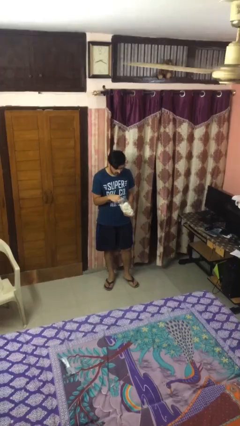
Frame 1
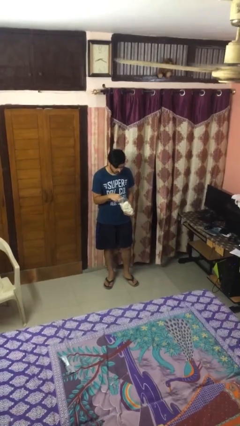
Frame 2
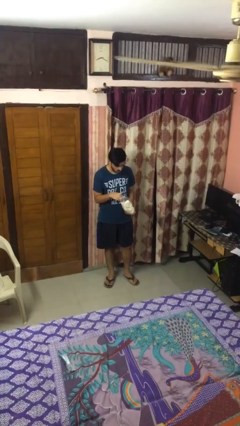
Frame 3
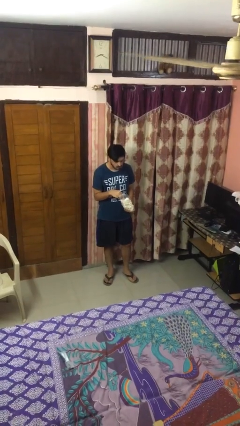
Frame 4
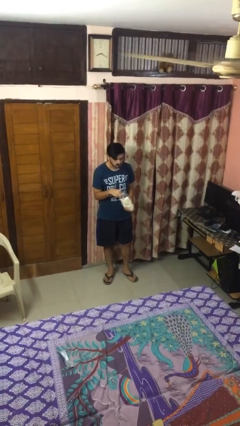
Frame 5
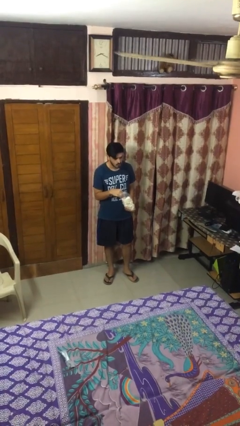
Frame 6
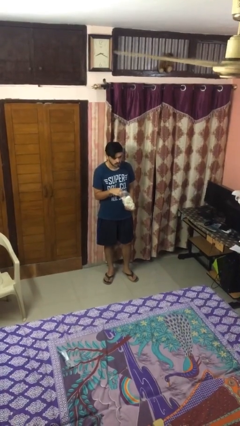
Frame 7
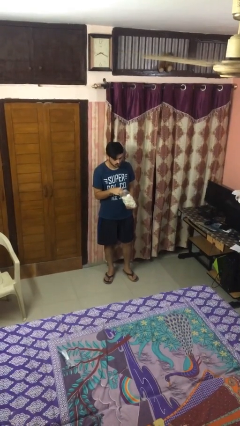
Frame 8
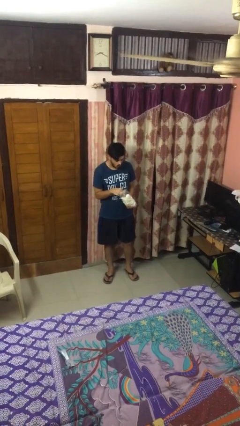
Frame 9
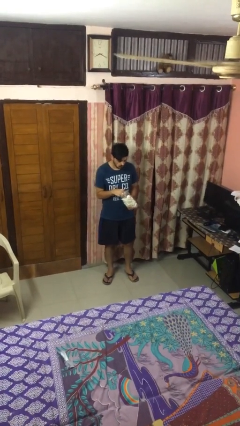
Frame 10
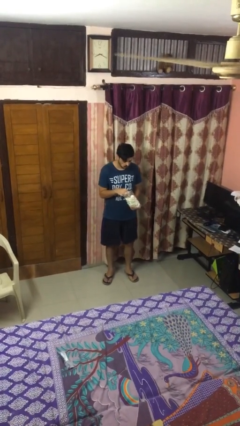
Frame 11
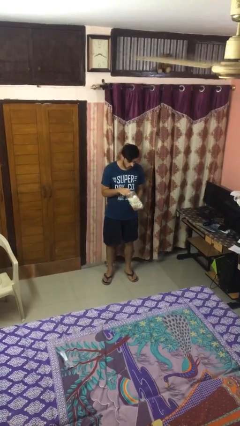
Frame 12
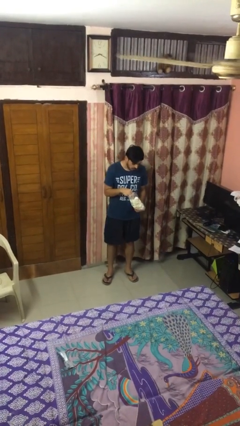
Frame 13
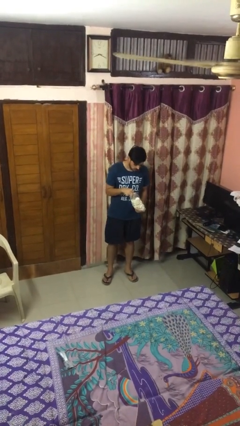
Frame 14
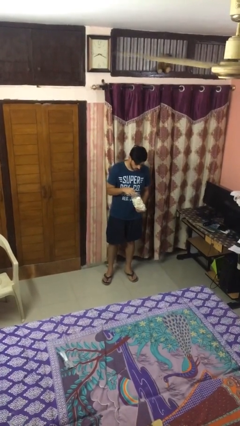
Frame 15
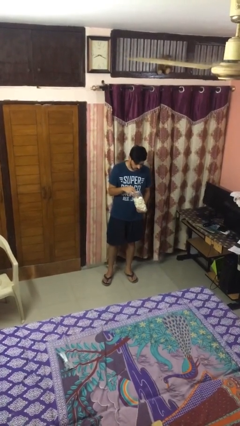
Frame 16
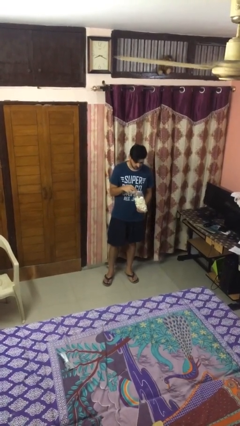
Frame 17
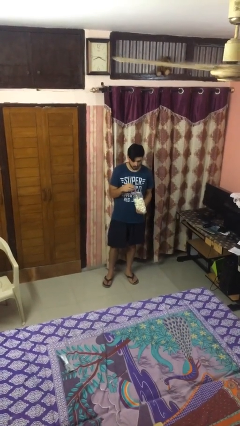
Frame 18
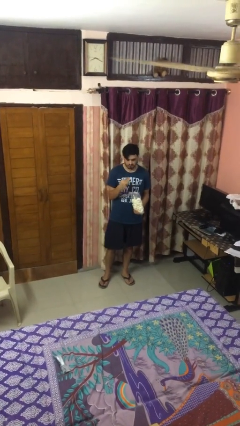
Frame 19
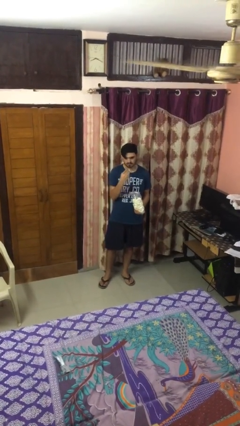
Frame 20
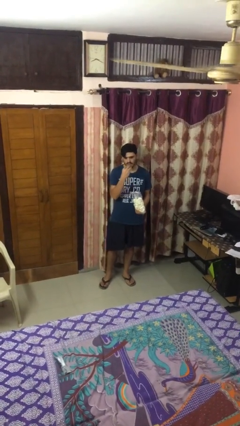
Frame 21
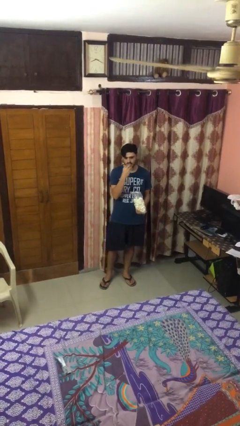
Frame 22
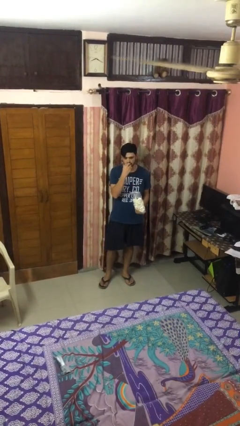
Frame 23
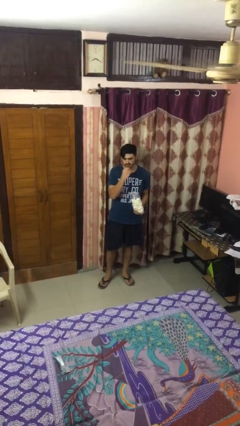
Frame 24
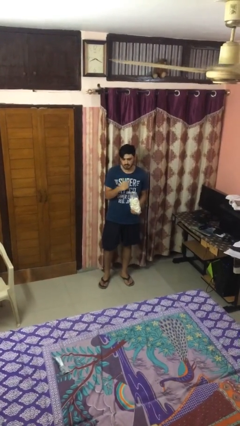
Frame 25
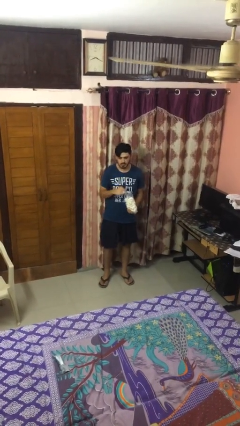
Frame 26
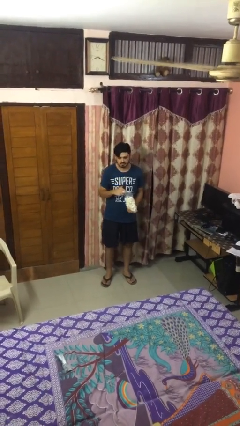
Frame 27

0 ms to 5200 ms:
person eats snack from bag

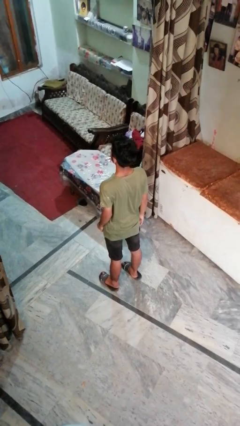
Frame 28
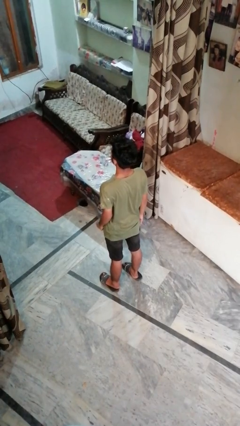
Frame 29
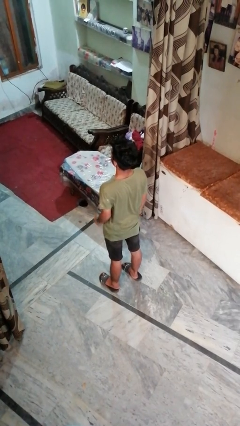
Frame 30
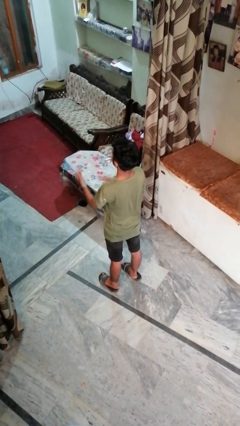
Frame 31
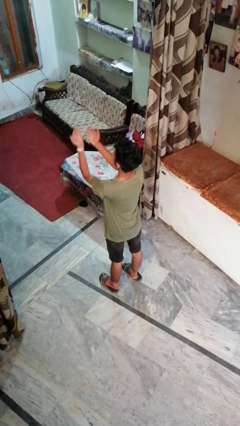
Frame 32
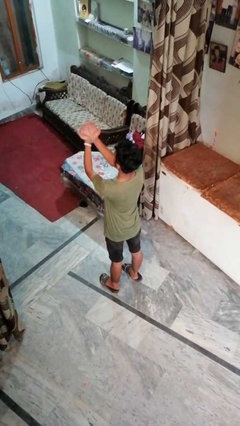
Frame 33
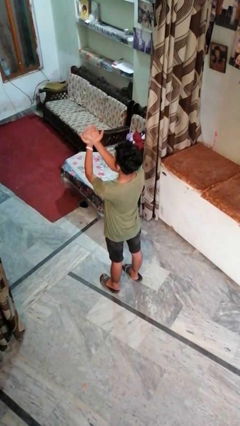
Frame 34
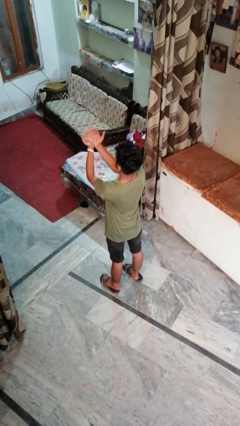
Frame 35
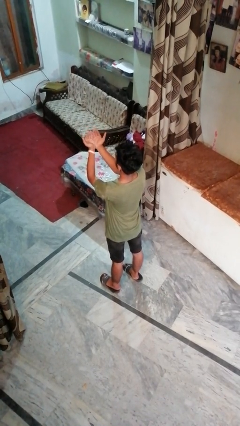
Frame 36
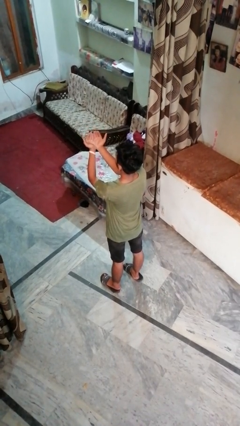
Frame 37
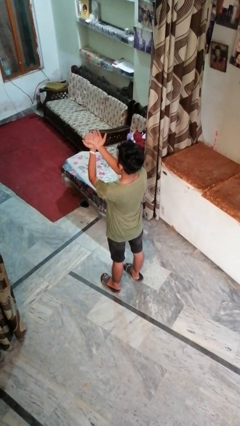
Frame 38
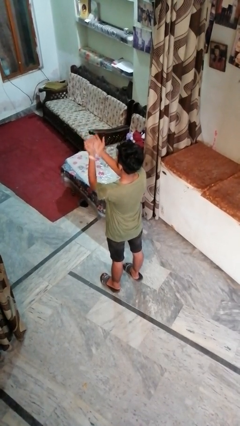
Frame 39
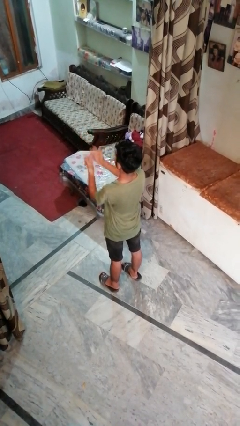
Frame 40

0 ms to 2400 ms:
person prays

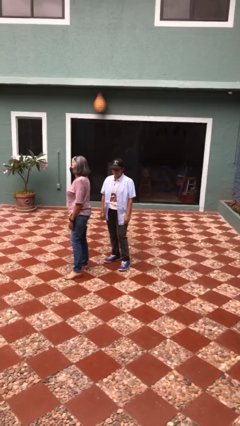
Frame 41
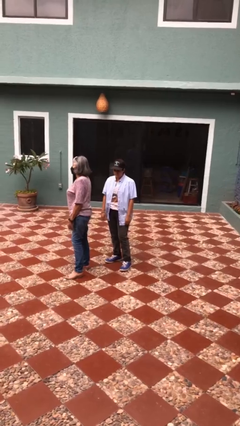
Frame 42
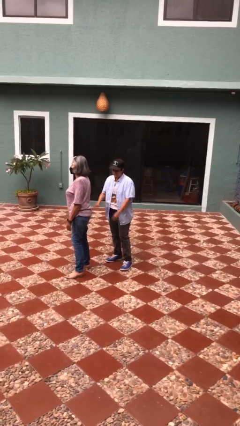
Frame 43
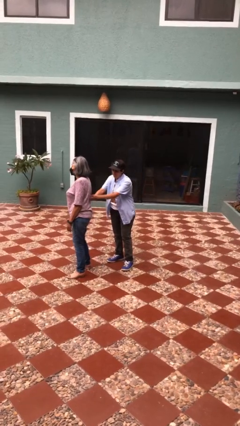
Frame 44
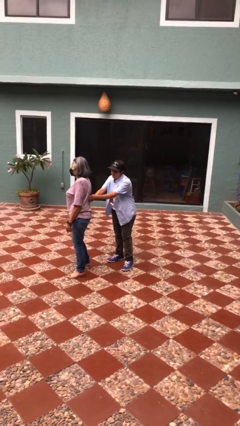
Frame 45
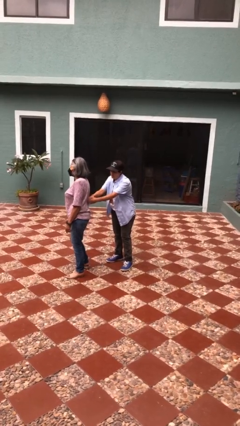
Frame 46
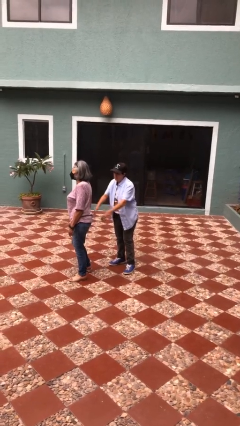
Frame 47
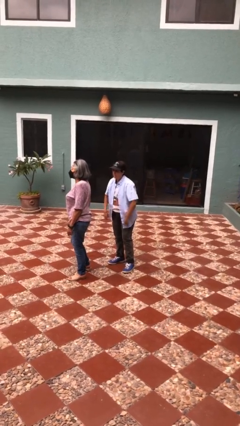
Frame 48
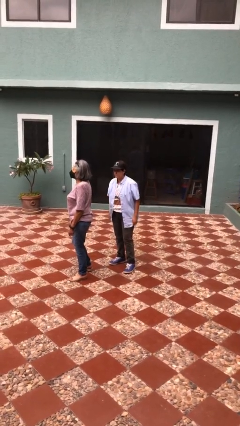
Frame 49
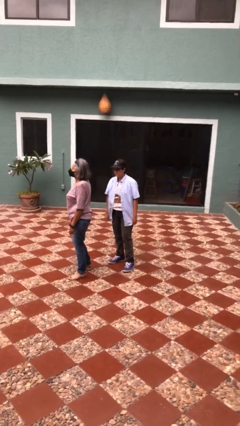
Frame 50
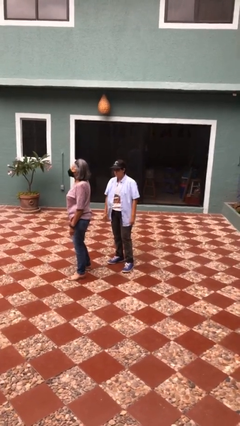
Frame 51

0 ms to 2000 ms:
person tickles person

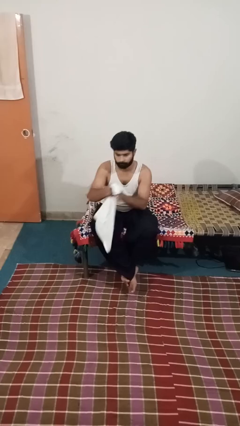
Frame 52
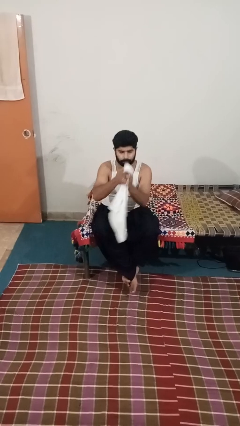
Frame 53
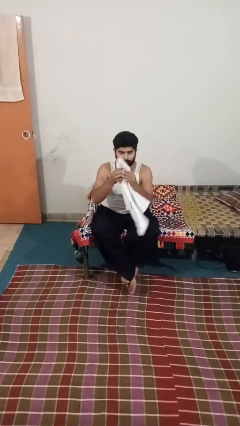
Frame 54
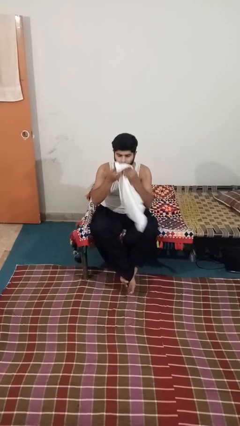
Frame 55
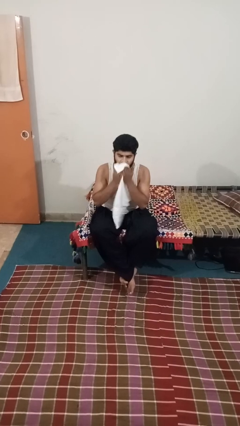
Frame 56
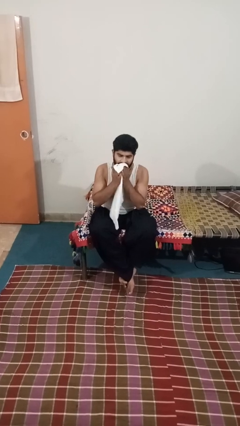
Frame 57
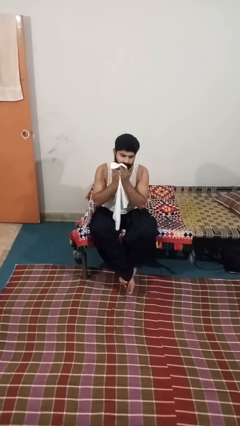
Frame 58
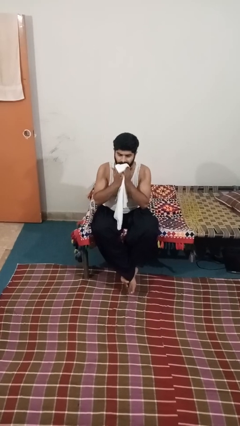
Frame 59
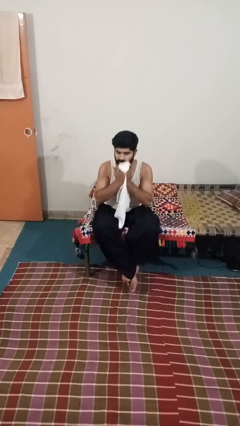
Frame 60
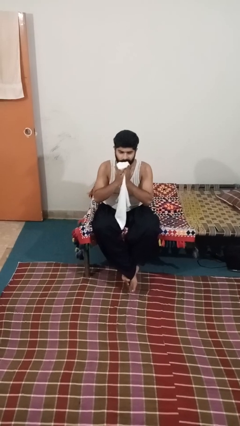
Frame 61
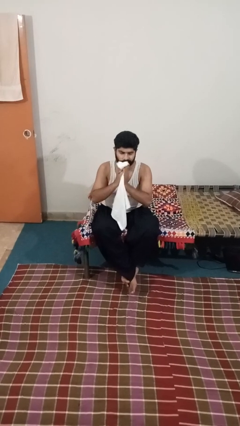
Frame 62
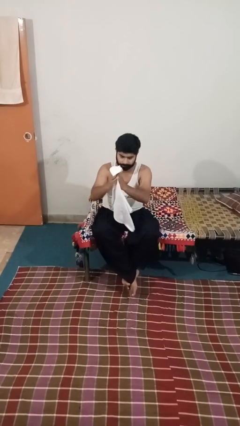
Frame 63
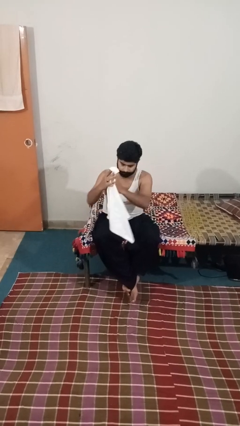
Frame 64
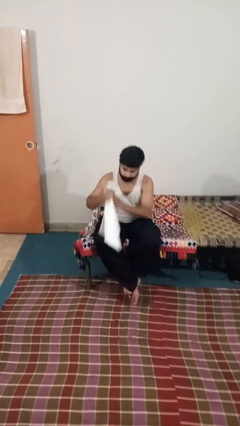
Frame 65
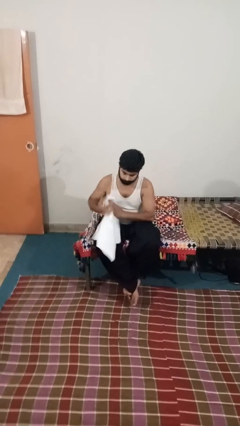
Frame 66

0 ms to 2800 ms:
person wipes mouth with napkin

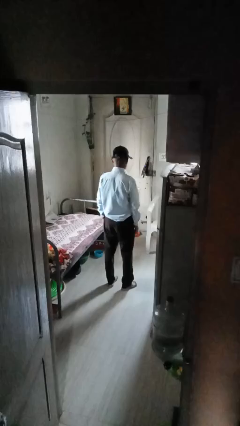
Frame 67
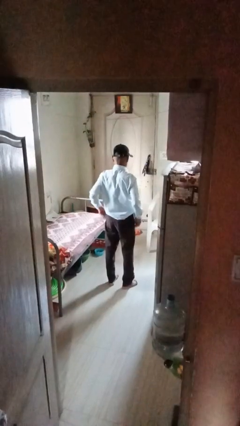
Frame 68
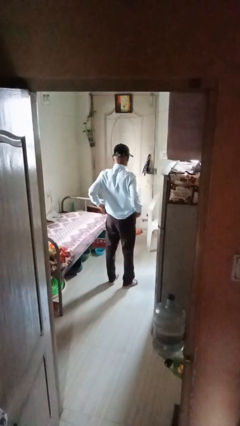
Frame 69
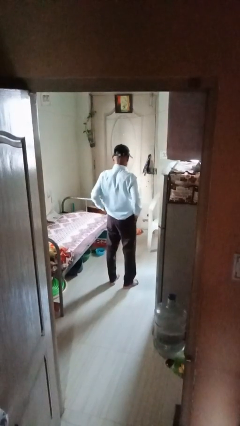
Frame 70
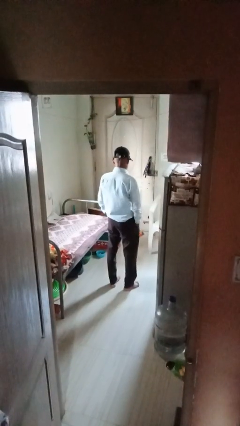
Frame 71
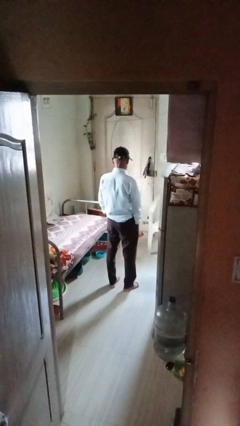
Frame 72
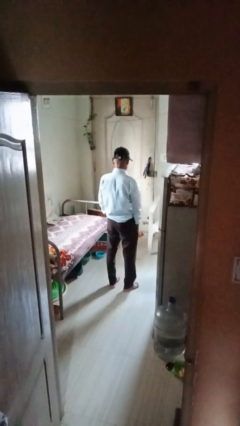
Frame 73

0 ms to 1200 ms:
person puts hands in back pockets

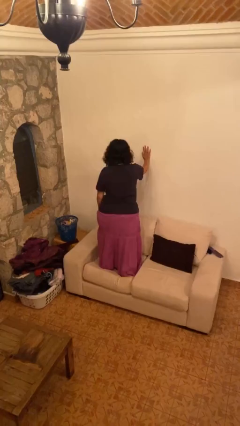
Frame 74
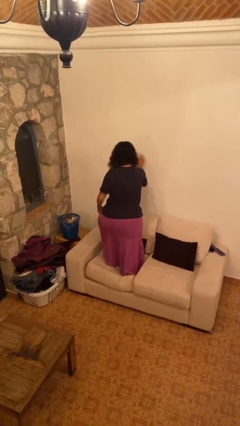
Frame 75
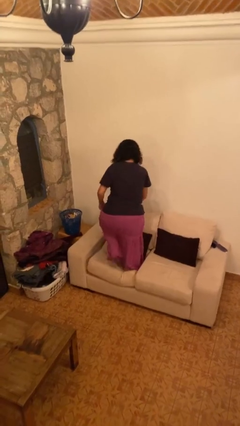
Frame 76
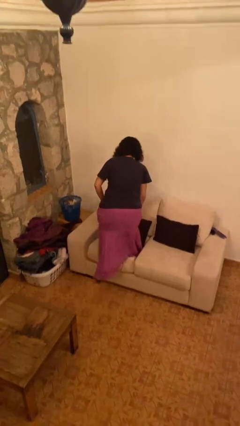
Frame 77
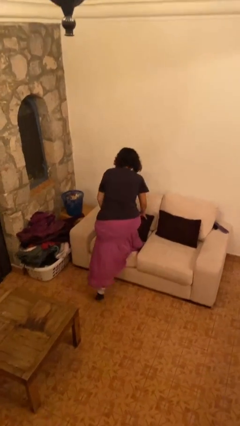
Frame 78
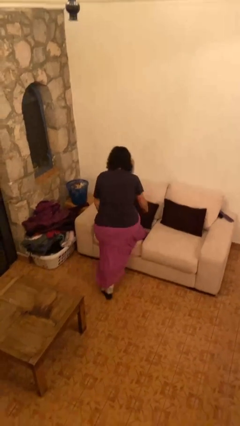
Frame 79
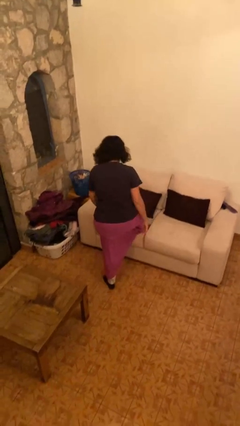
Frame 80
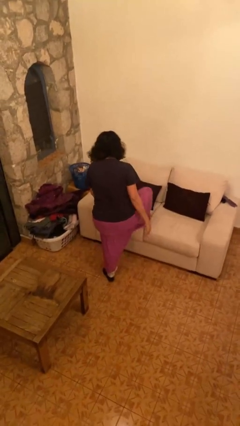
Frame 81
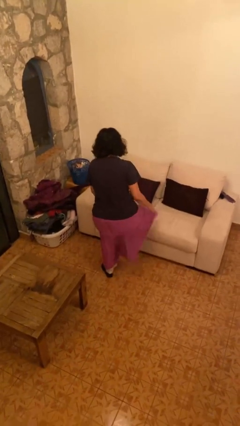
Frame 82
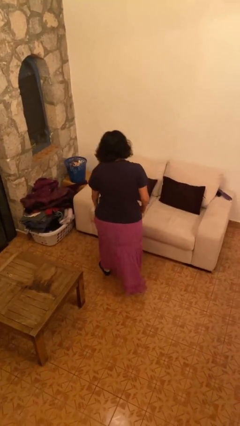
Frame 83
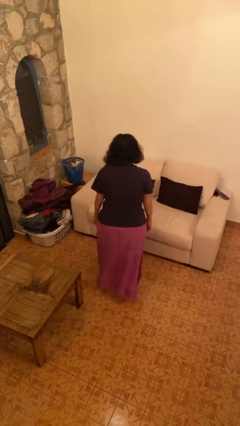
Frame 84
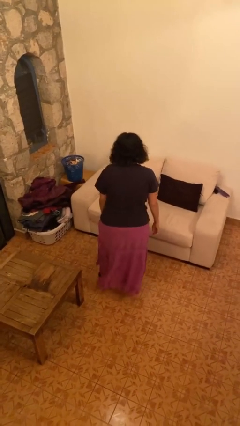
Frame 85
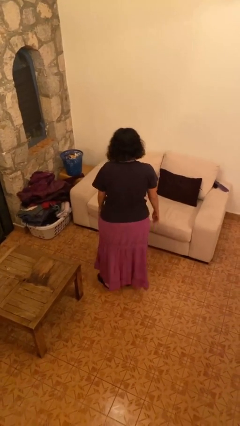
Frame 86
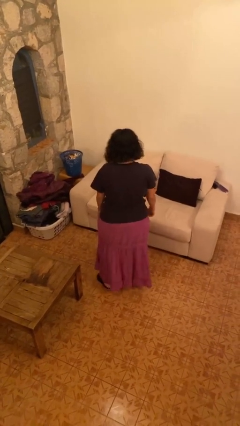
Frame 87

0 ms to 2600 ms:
person climbs off couch

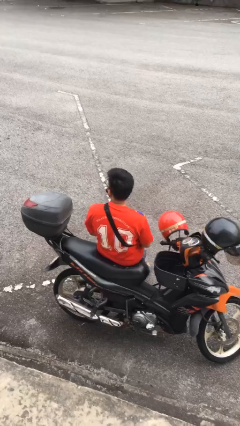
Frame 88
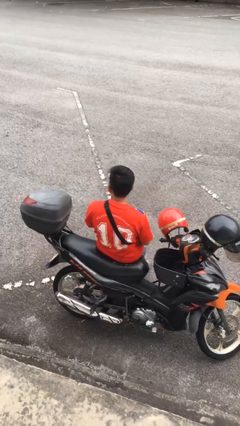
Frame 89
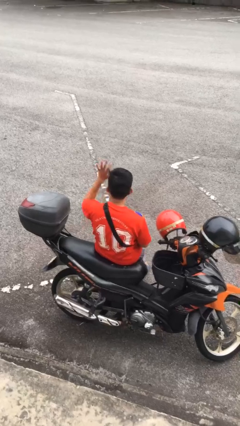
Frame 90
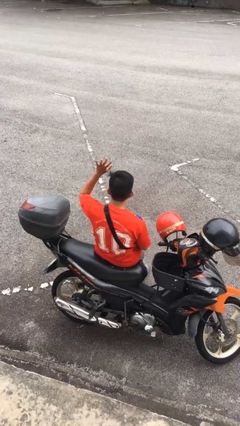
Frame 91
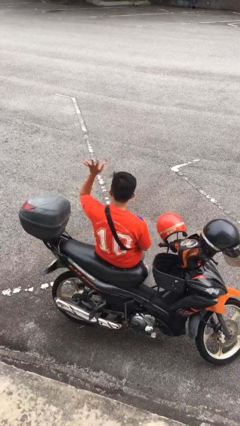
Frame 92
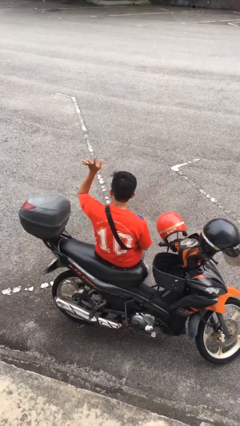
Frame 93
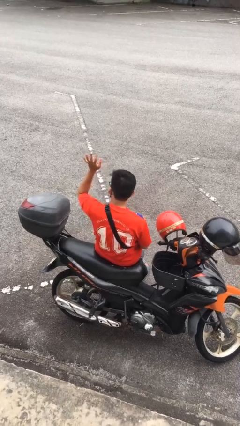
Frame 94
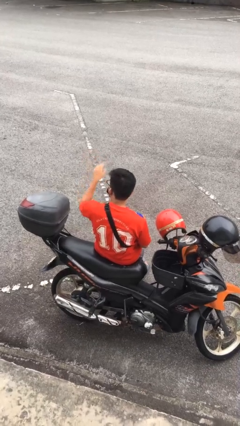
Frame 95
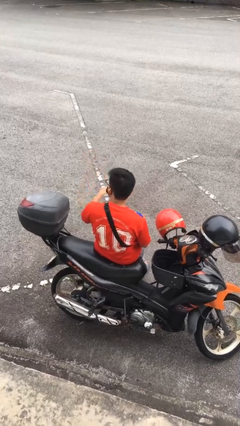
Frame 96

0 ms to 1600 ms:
person waves at person
